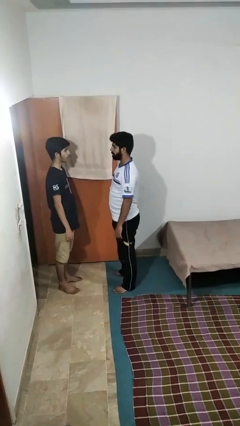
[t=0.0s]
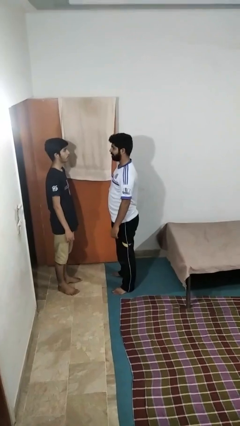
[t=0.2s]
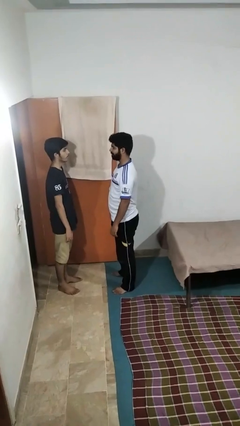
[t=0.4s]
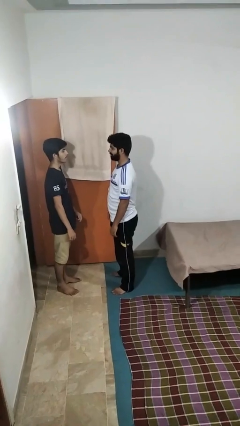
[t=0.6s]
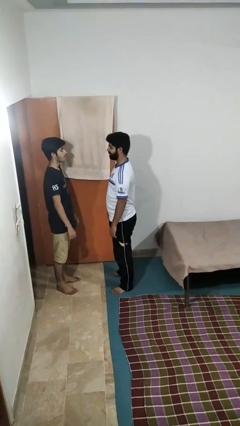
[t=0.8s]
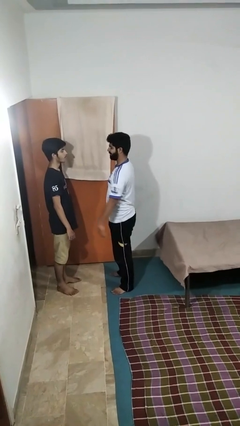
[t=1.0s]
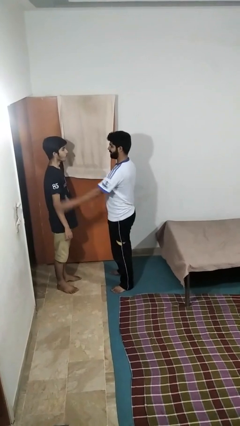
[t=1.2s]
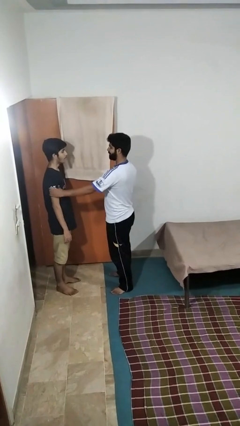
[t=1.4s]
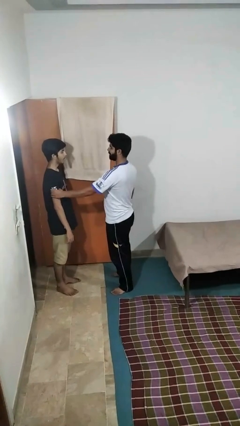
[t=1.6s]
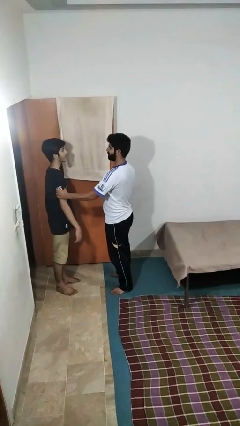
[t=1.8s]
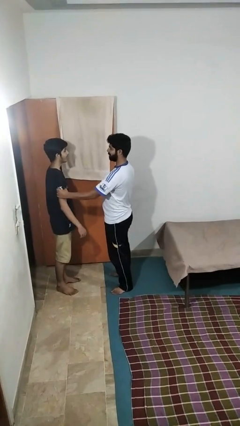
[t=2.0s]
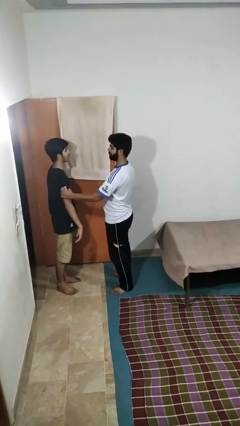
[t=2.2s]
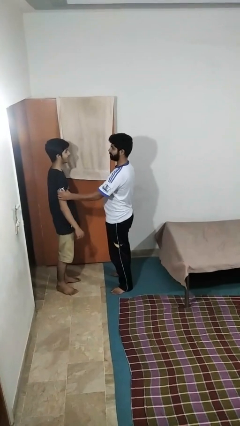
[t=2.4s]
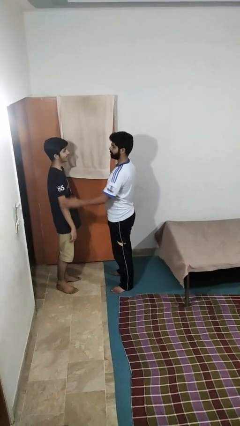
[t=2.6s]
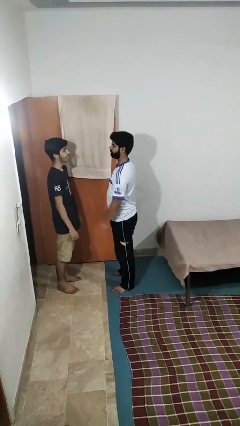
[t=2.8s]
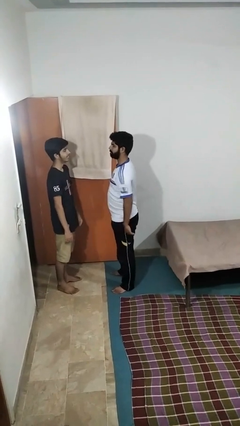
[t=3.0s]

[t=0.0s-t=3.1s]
person grabs person by bicep

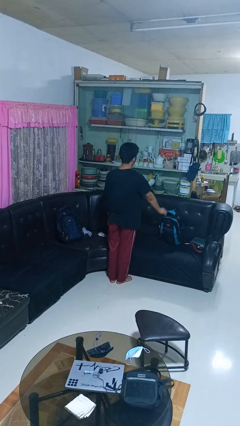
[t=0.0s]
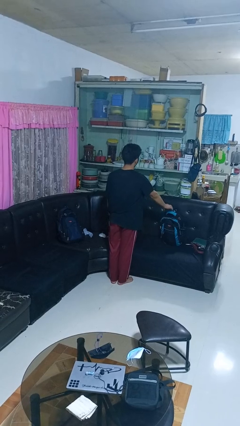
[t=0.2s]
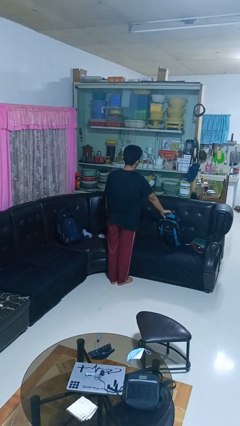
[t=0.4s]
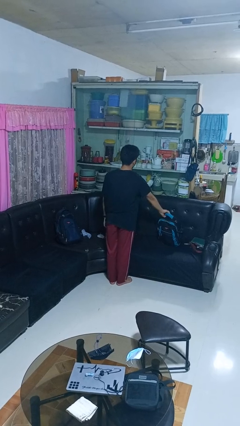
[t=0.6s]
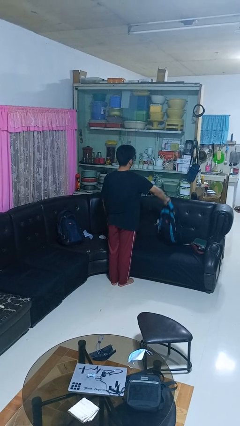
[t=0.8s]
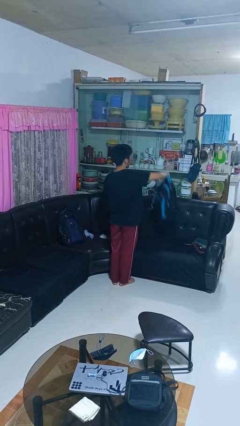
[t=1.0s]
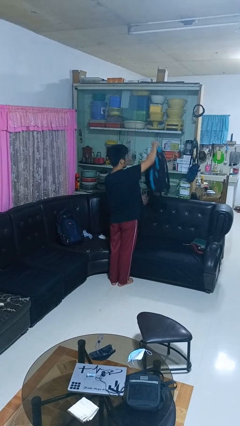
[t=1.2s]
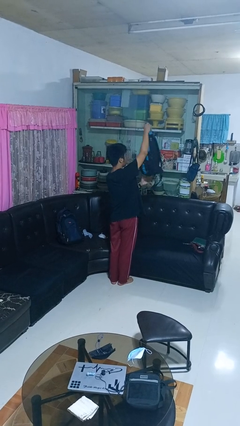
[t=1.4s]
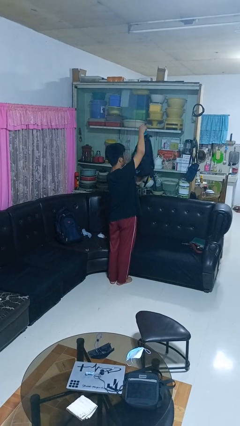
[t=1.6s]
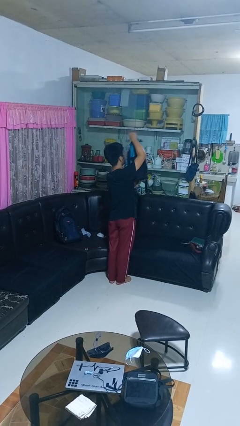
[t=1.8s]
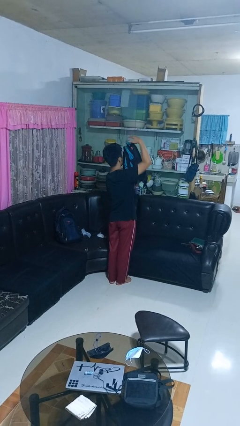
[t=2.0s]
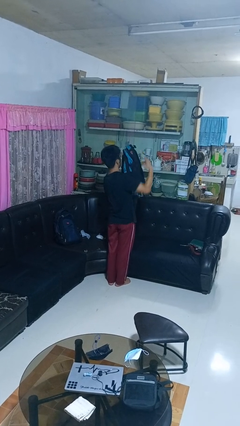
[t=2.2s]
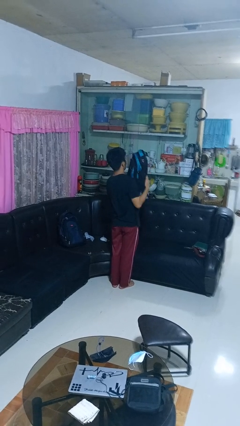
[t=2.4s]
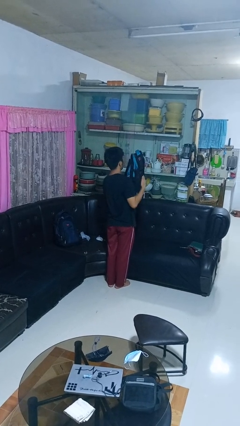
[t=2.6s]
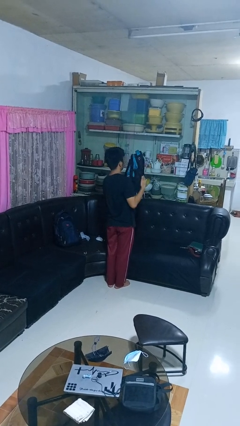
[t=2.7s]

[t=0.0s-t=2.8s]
person picks up object from couch

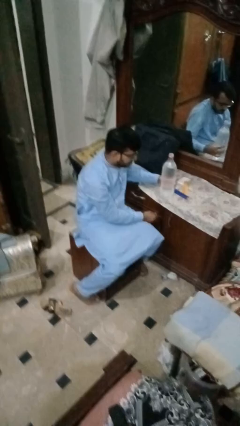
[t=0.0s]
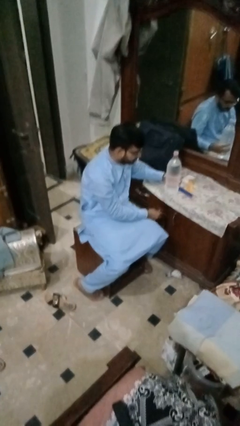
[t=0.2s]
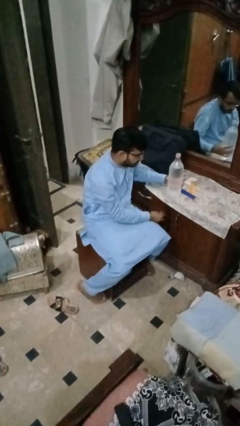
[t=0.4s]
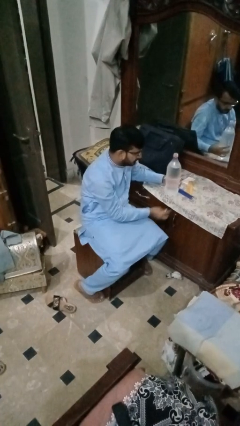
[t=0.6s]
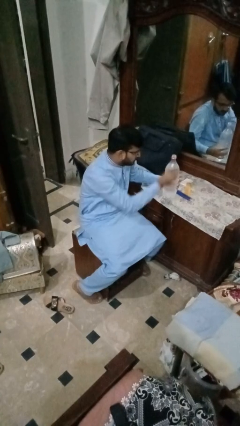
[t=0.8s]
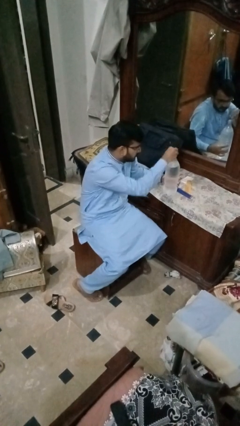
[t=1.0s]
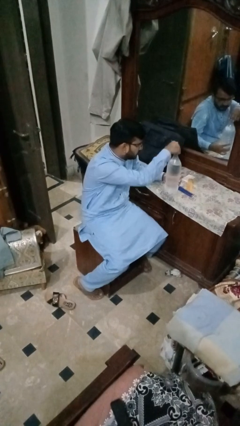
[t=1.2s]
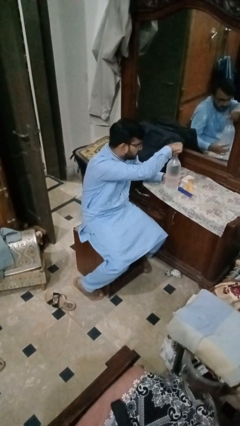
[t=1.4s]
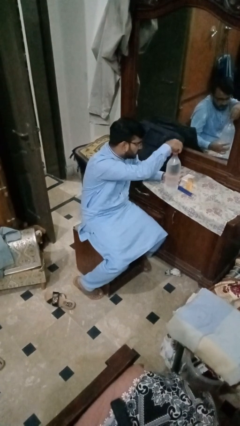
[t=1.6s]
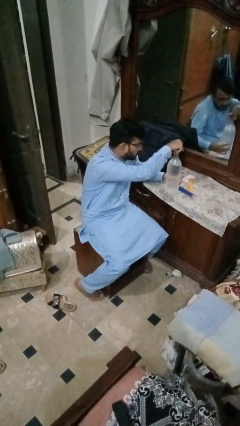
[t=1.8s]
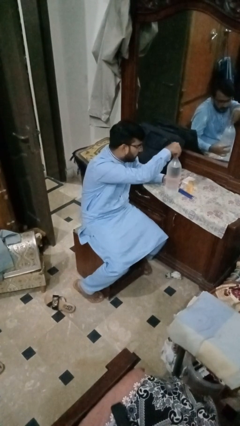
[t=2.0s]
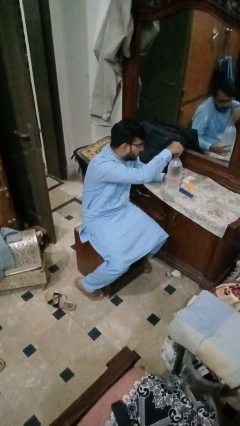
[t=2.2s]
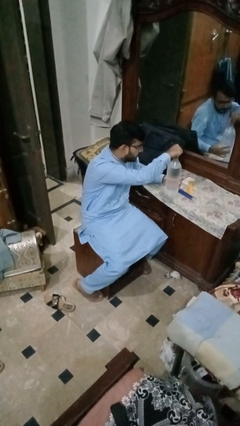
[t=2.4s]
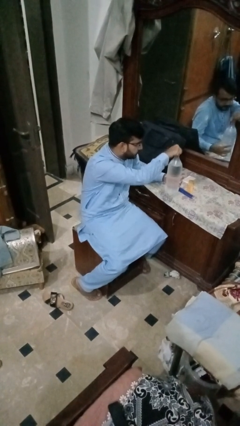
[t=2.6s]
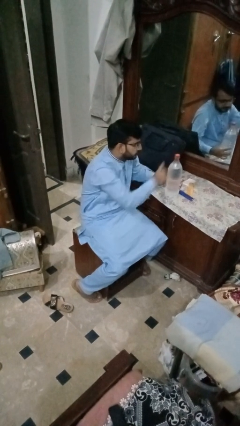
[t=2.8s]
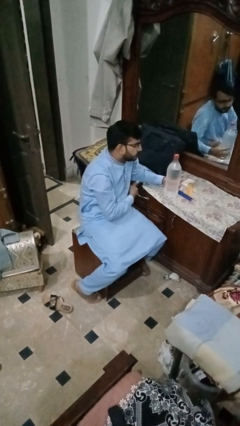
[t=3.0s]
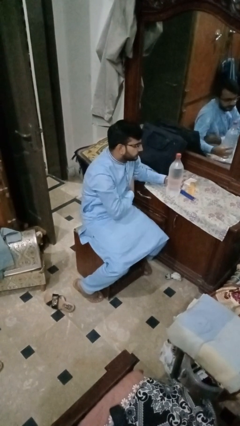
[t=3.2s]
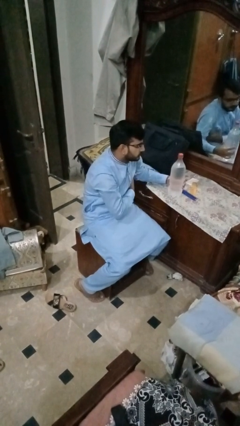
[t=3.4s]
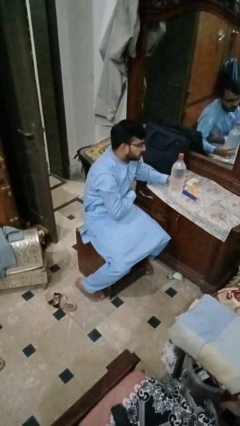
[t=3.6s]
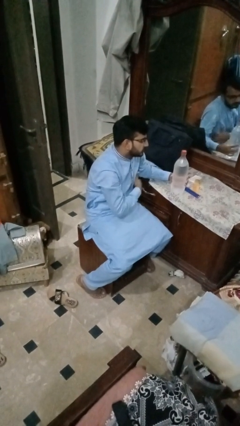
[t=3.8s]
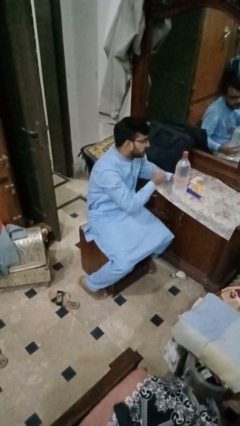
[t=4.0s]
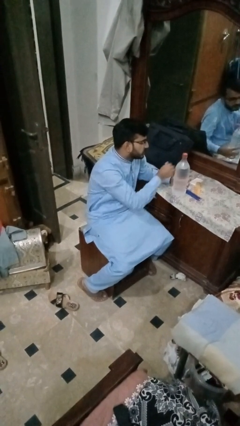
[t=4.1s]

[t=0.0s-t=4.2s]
person screws lid to bottle

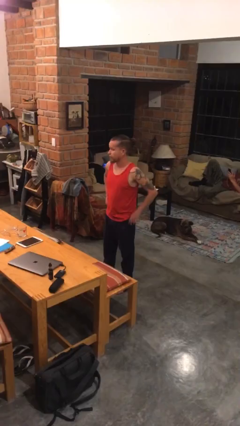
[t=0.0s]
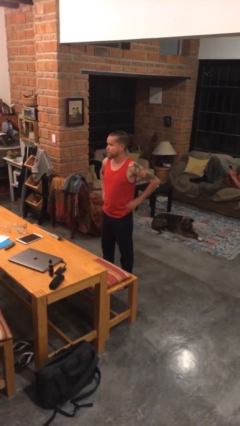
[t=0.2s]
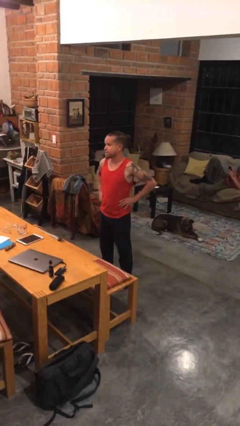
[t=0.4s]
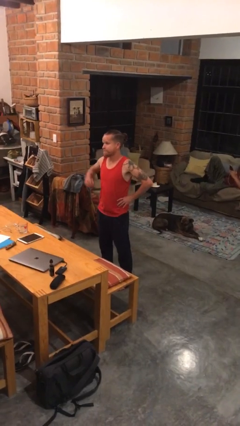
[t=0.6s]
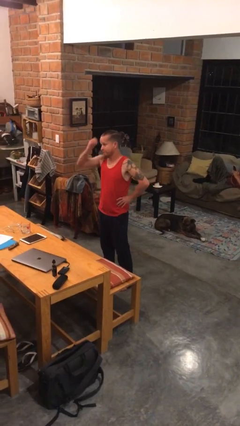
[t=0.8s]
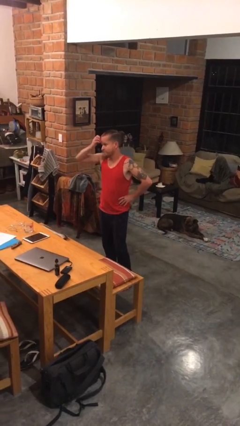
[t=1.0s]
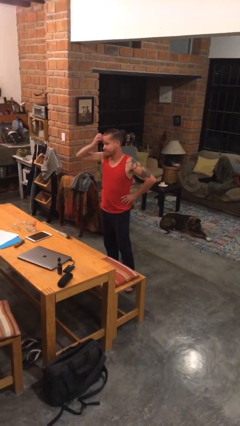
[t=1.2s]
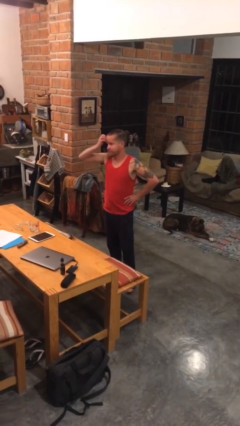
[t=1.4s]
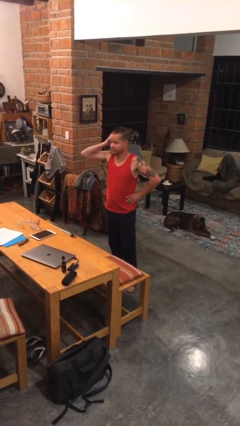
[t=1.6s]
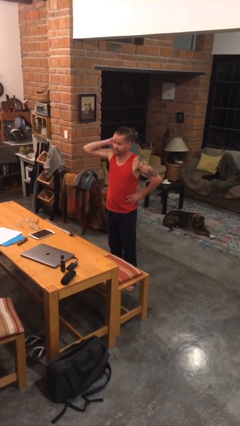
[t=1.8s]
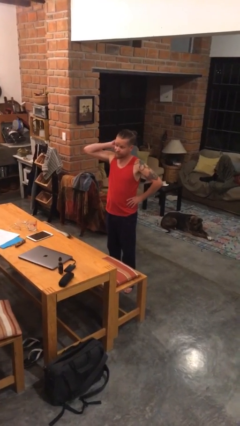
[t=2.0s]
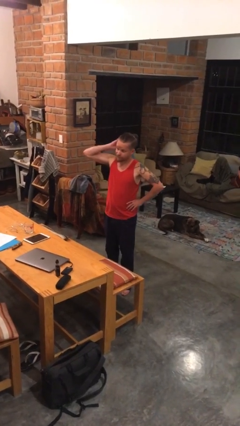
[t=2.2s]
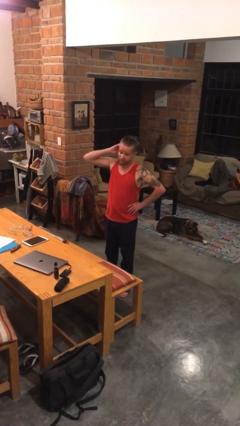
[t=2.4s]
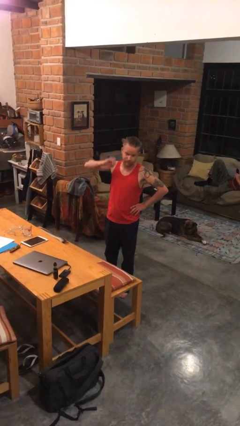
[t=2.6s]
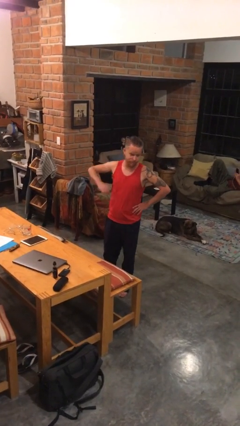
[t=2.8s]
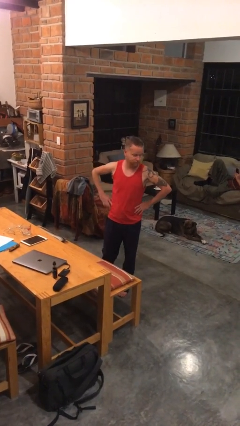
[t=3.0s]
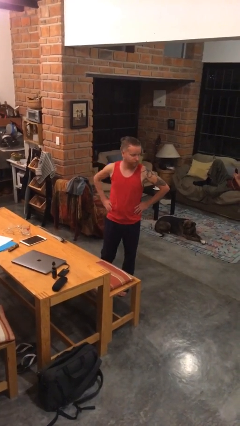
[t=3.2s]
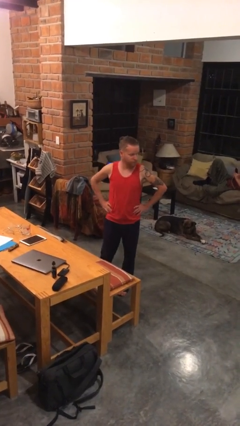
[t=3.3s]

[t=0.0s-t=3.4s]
person scratches face

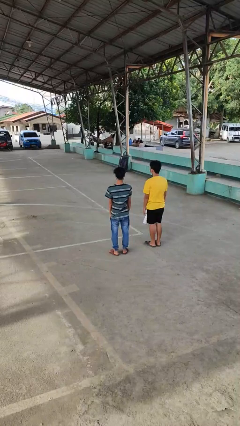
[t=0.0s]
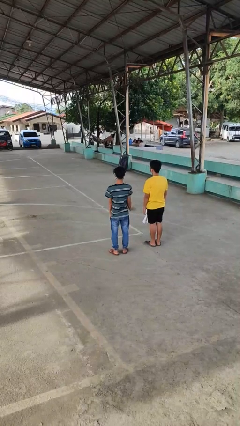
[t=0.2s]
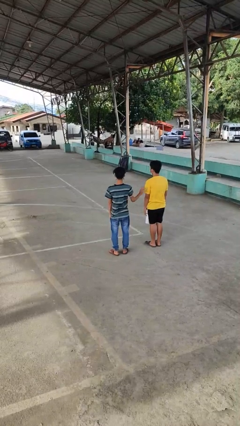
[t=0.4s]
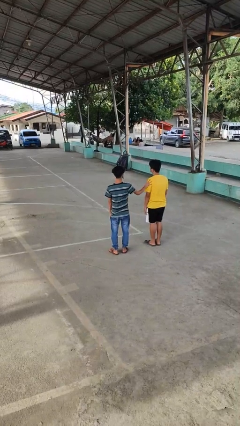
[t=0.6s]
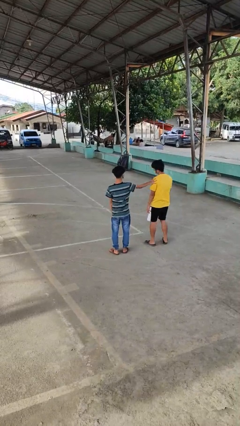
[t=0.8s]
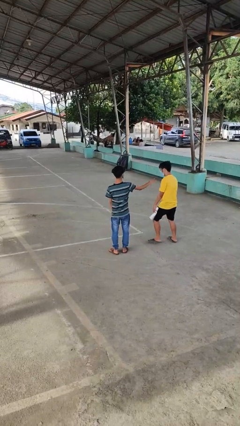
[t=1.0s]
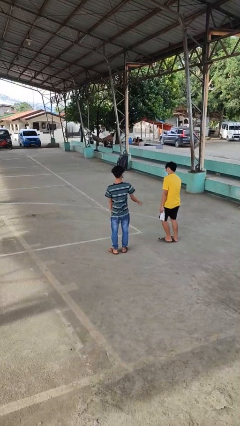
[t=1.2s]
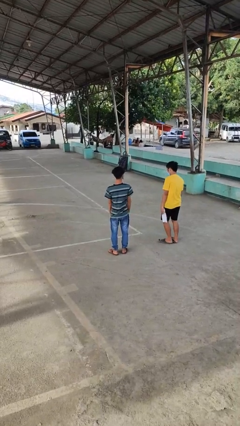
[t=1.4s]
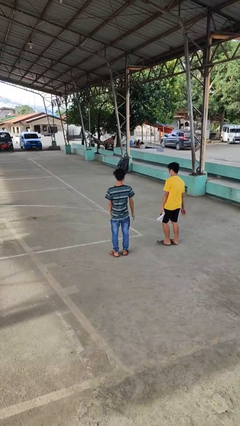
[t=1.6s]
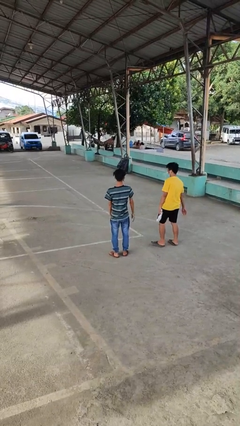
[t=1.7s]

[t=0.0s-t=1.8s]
person shoves person

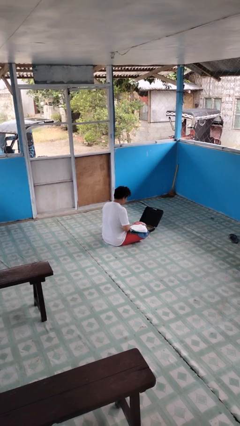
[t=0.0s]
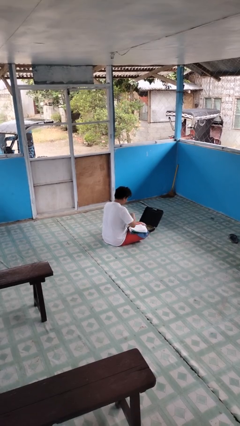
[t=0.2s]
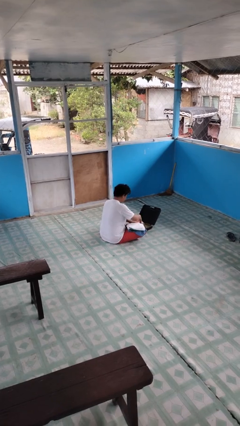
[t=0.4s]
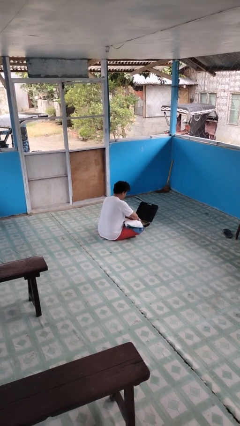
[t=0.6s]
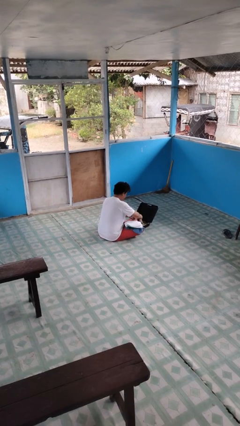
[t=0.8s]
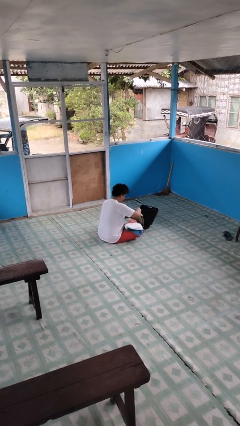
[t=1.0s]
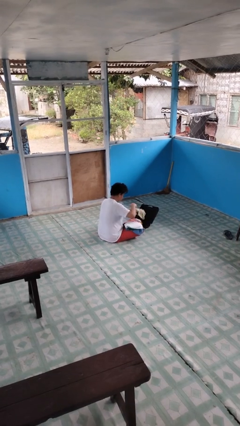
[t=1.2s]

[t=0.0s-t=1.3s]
person unloads clothes from suitcase

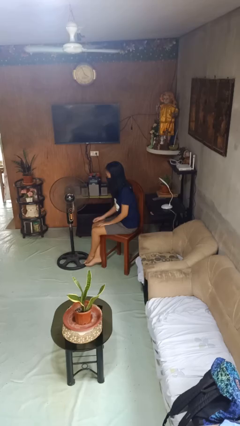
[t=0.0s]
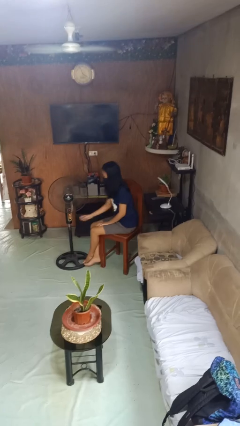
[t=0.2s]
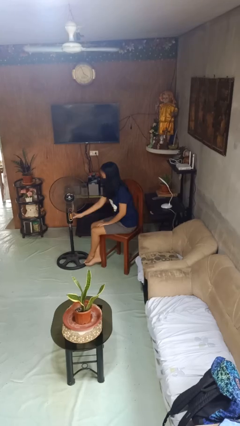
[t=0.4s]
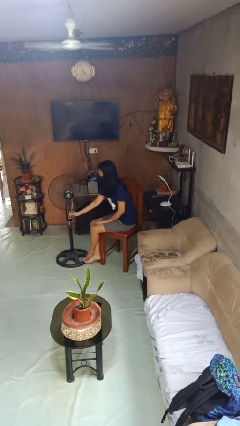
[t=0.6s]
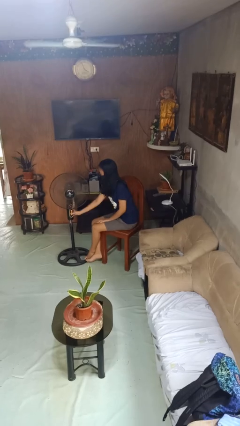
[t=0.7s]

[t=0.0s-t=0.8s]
person turns on fan
